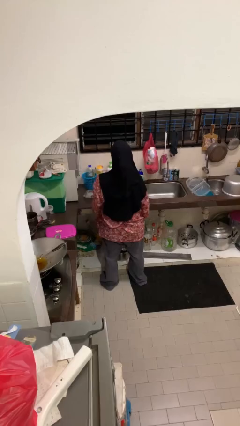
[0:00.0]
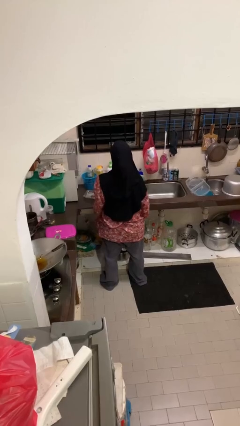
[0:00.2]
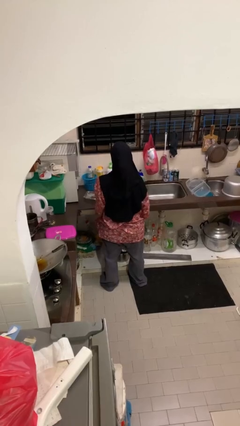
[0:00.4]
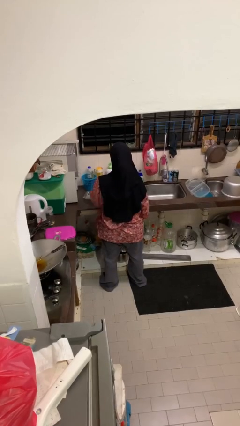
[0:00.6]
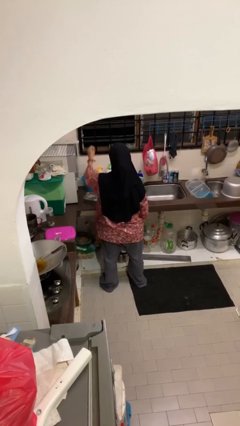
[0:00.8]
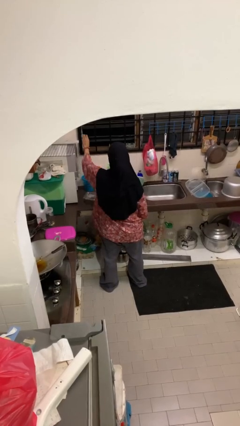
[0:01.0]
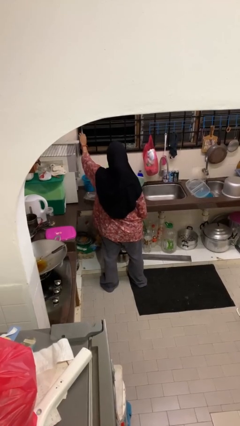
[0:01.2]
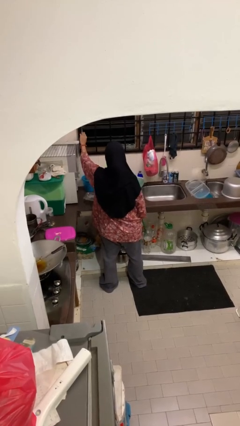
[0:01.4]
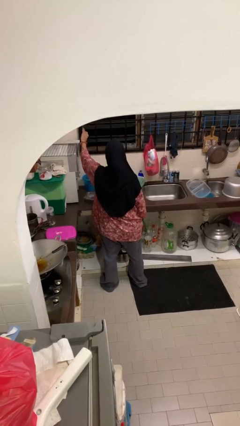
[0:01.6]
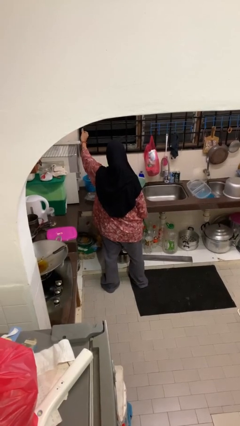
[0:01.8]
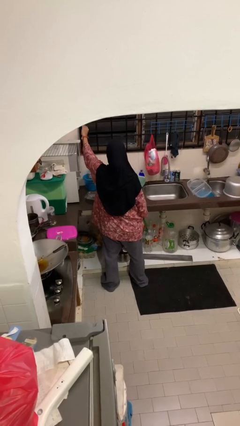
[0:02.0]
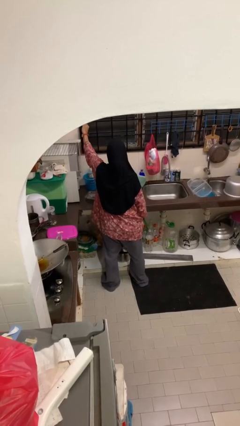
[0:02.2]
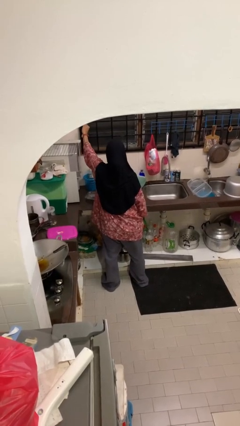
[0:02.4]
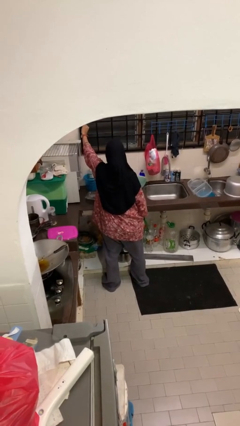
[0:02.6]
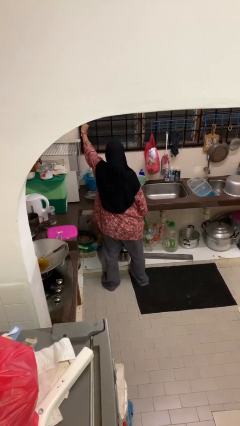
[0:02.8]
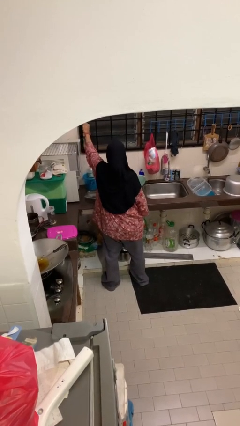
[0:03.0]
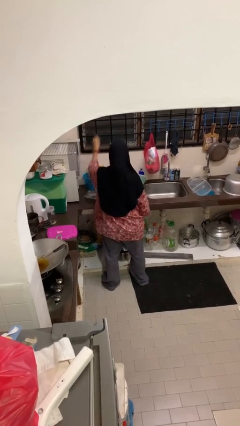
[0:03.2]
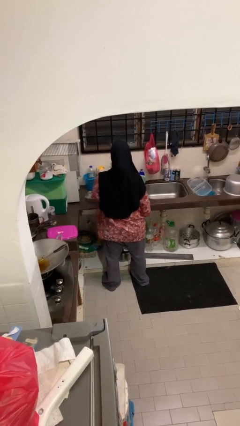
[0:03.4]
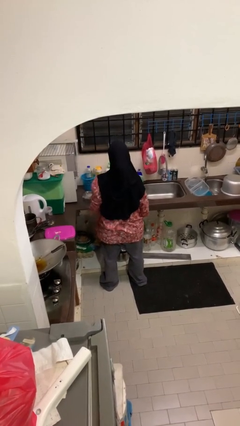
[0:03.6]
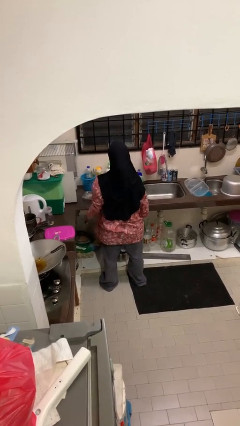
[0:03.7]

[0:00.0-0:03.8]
person closes home window

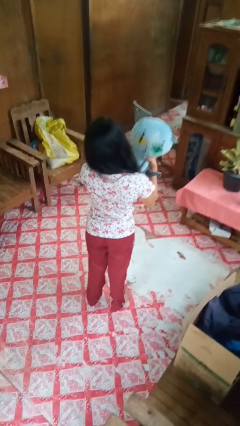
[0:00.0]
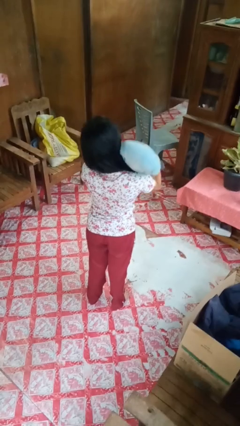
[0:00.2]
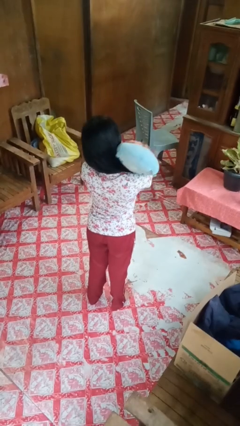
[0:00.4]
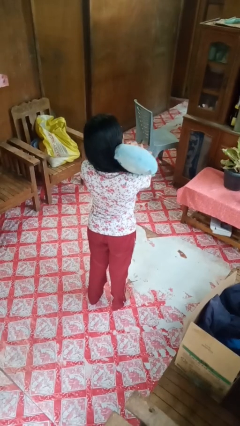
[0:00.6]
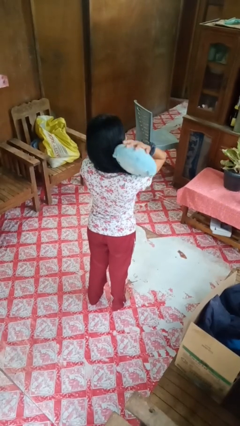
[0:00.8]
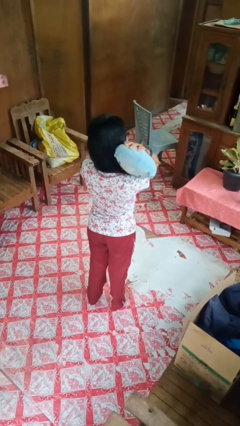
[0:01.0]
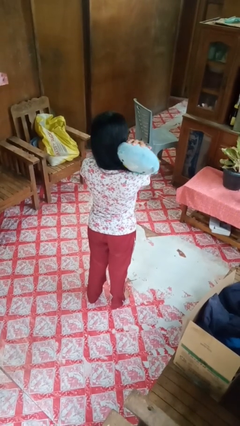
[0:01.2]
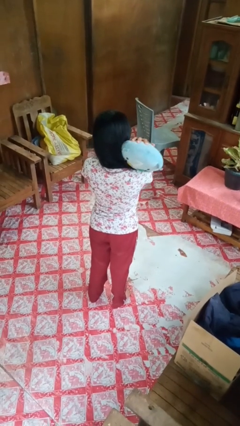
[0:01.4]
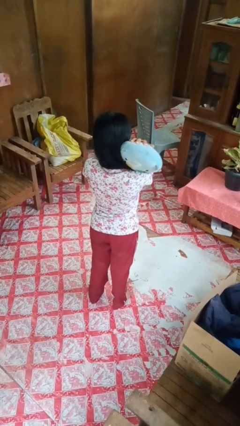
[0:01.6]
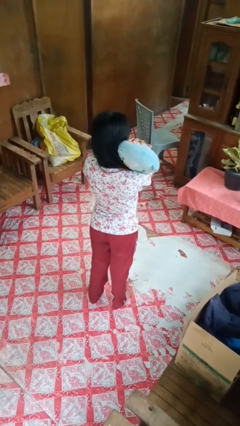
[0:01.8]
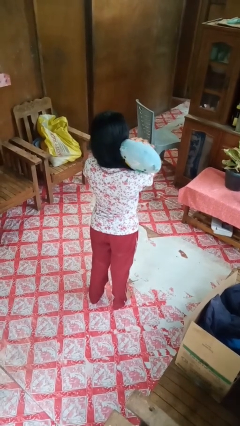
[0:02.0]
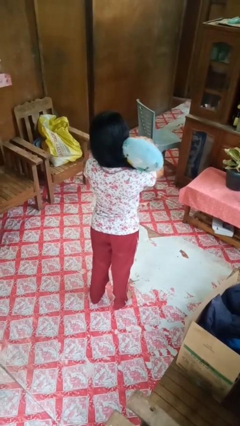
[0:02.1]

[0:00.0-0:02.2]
person hugs stuffed animal

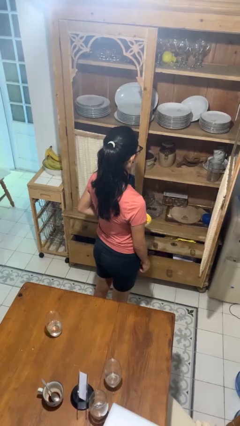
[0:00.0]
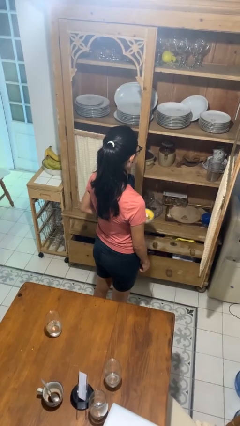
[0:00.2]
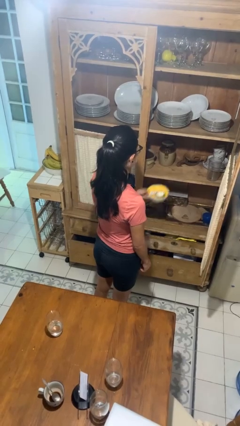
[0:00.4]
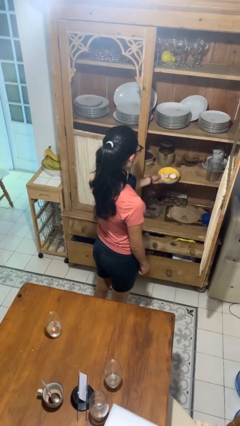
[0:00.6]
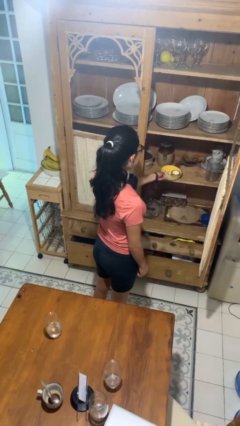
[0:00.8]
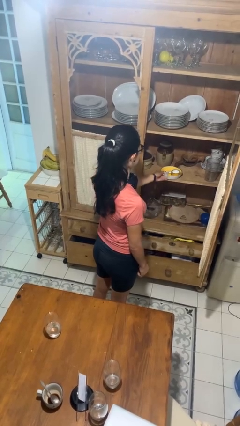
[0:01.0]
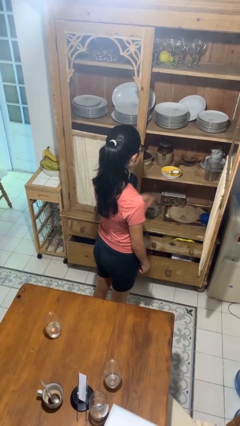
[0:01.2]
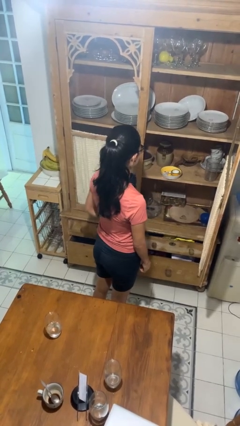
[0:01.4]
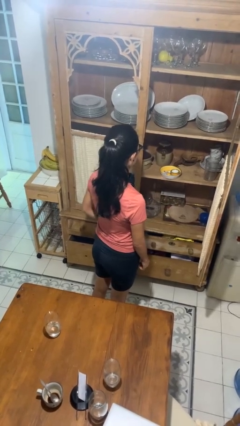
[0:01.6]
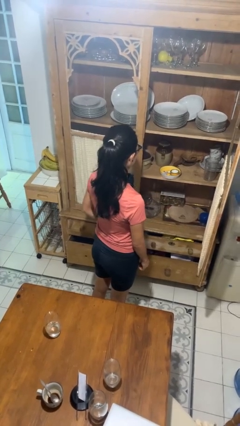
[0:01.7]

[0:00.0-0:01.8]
person puts object in cabinet

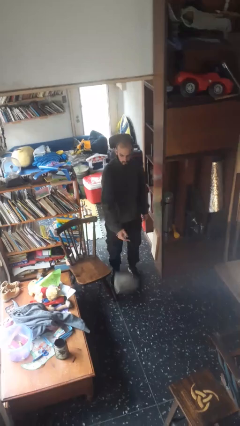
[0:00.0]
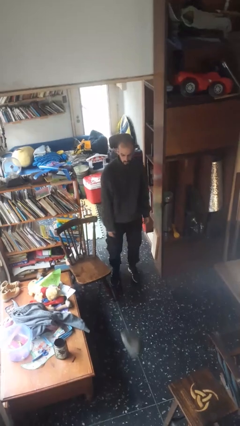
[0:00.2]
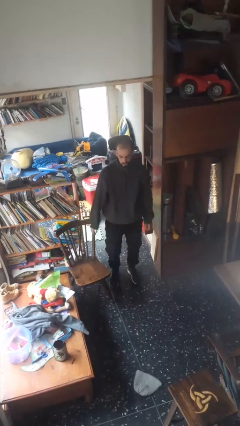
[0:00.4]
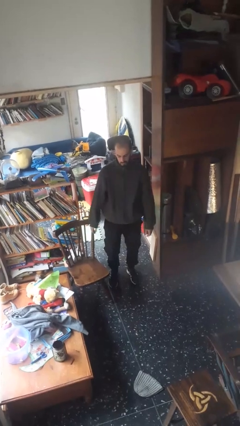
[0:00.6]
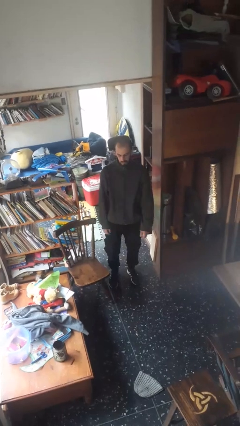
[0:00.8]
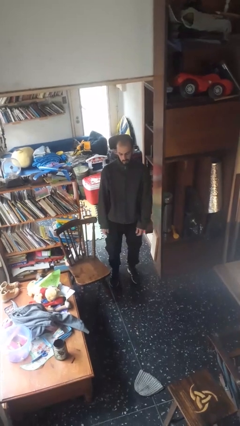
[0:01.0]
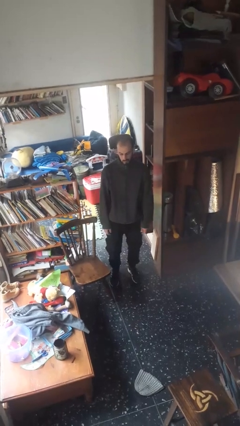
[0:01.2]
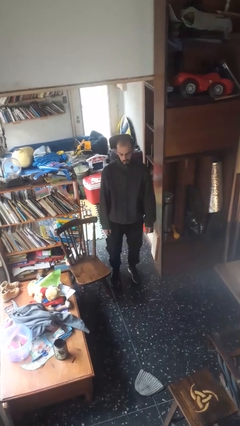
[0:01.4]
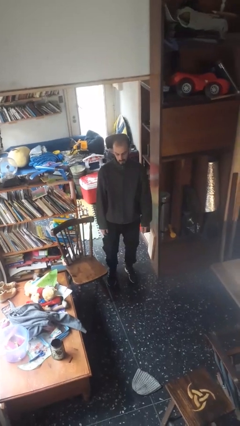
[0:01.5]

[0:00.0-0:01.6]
person throws object to ground

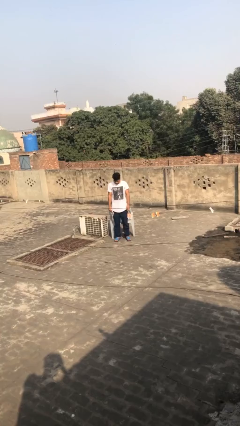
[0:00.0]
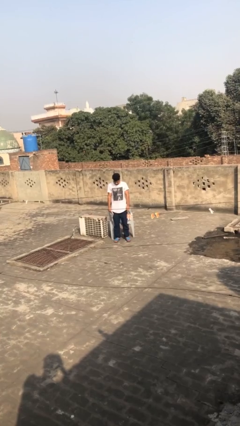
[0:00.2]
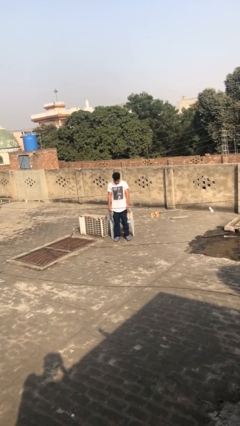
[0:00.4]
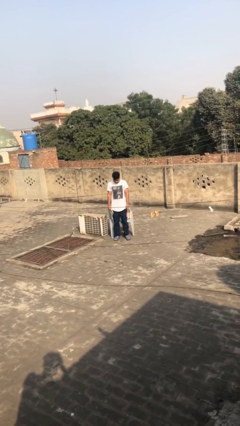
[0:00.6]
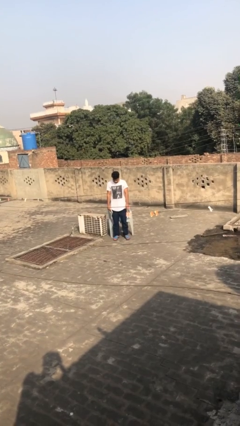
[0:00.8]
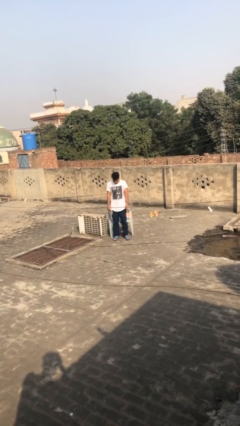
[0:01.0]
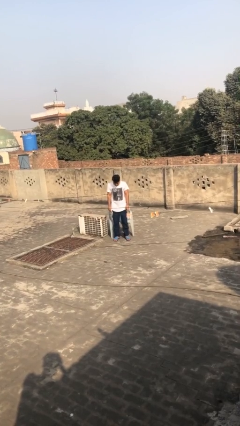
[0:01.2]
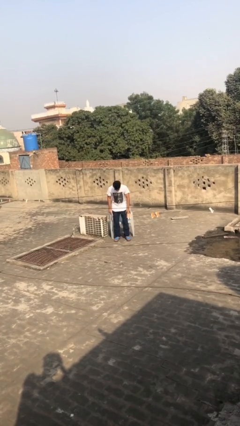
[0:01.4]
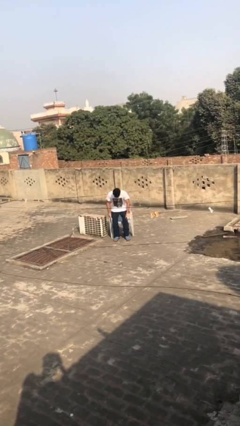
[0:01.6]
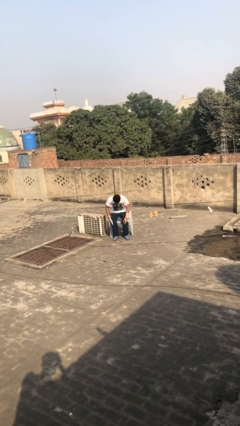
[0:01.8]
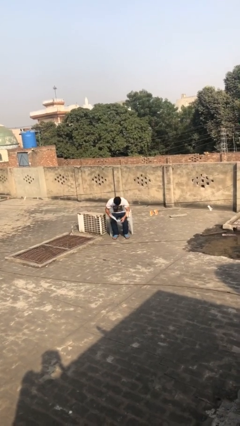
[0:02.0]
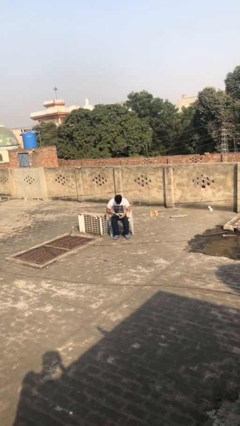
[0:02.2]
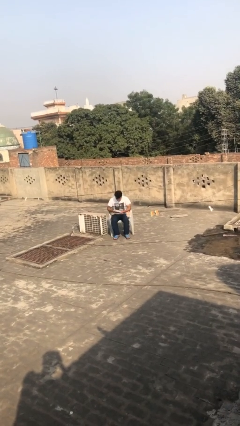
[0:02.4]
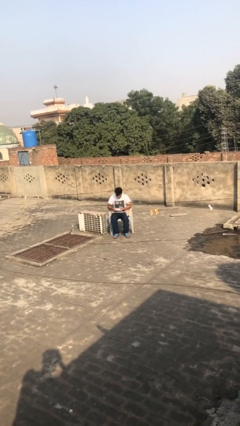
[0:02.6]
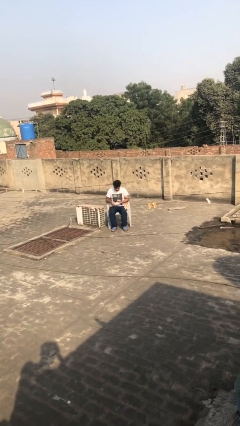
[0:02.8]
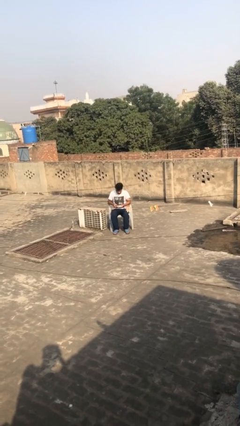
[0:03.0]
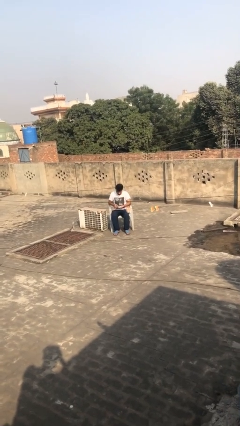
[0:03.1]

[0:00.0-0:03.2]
person sits down

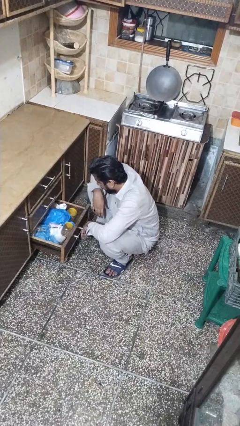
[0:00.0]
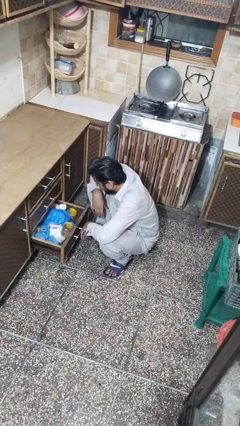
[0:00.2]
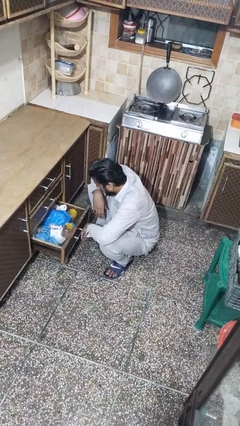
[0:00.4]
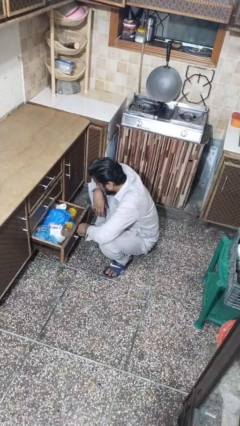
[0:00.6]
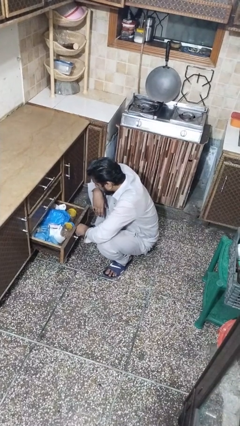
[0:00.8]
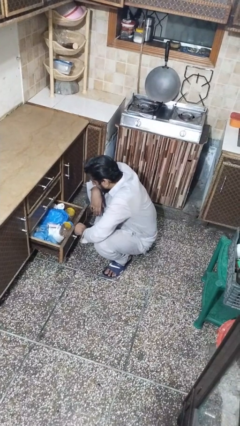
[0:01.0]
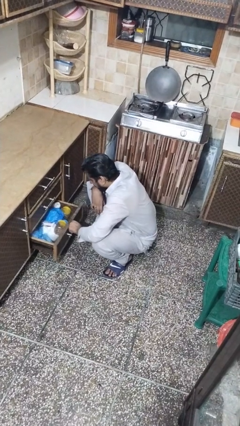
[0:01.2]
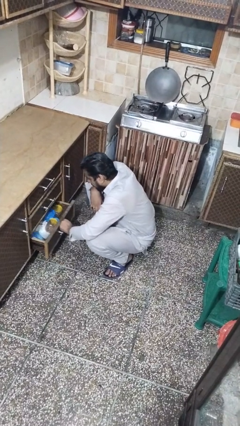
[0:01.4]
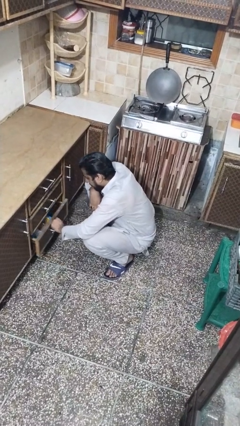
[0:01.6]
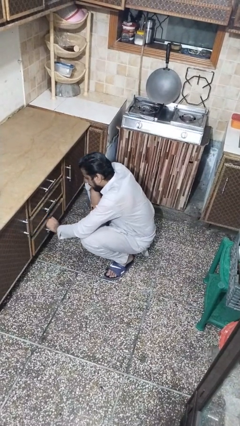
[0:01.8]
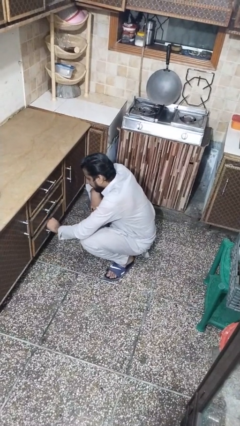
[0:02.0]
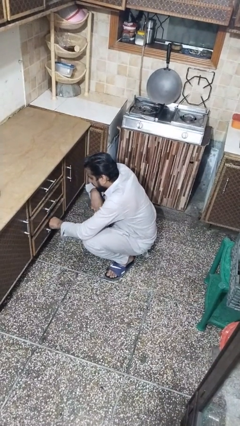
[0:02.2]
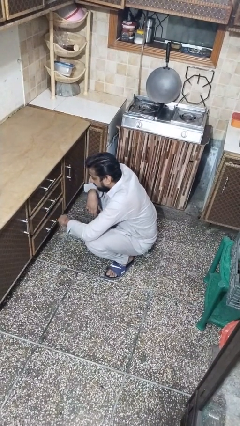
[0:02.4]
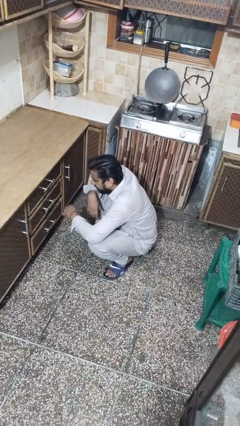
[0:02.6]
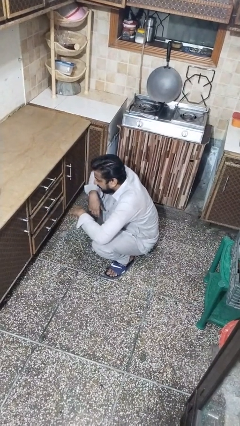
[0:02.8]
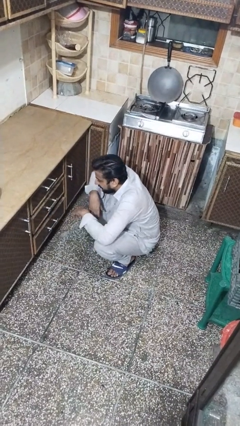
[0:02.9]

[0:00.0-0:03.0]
person closes kitchen drawer

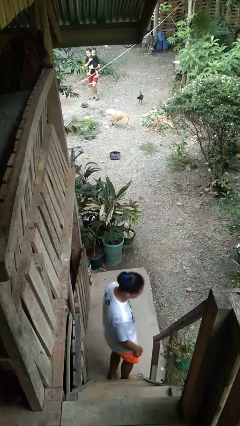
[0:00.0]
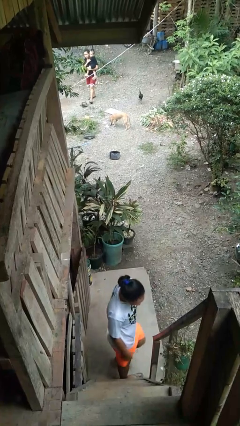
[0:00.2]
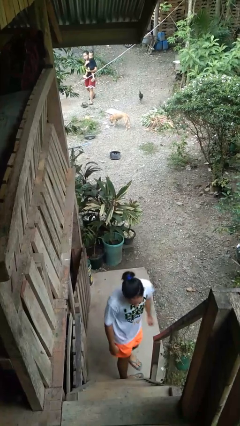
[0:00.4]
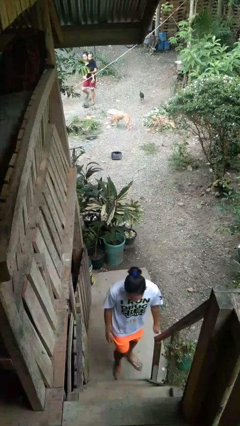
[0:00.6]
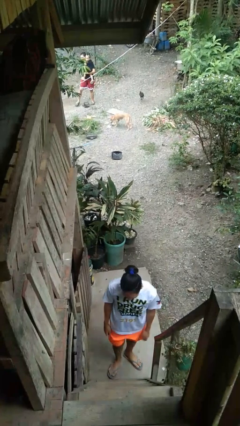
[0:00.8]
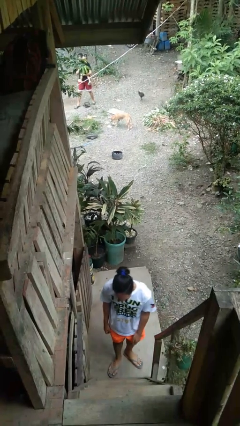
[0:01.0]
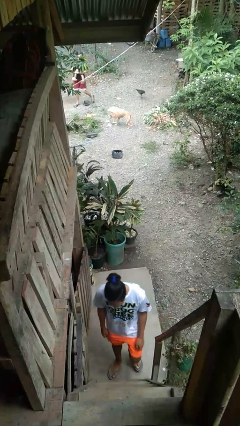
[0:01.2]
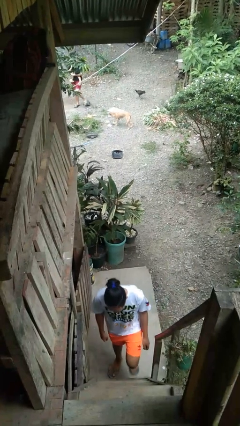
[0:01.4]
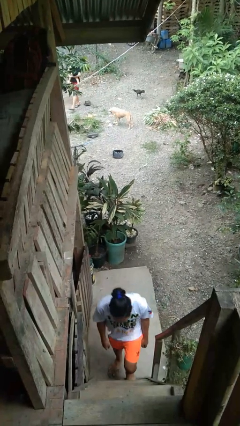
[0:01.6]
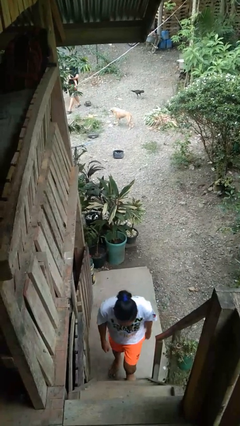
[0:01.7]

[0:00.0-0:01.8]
person climbs up stairs
